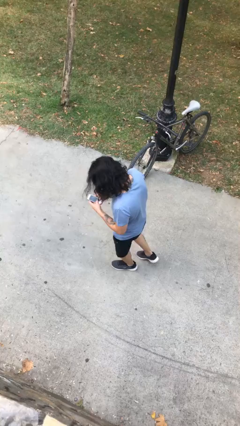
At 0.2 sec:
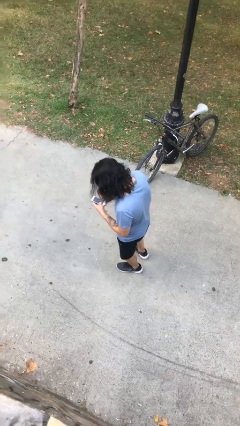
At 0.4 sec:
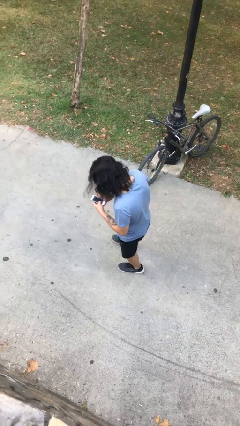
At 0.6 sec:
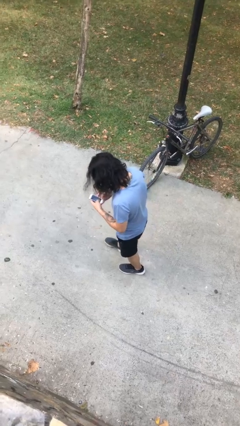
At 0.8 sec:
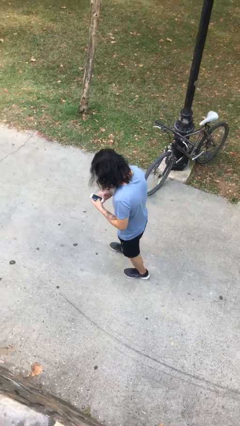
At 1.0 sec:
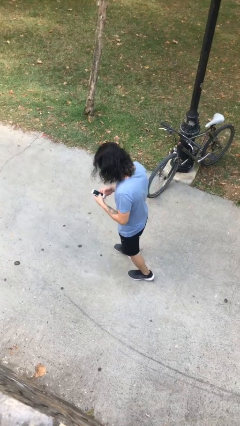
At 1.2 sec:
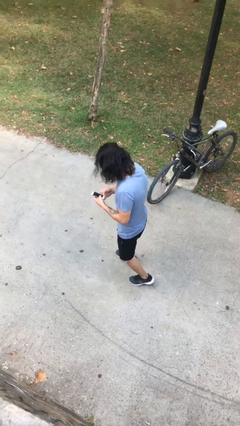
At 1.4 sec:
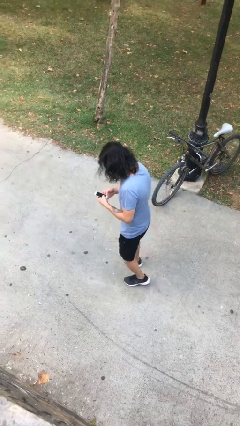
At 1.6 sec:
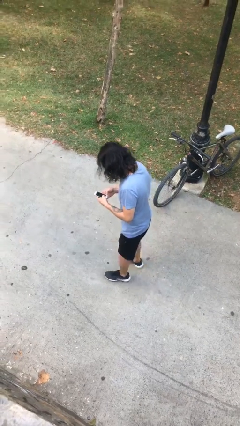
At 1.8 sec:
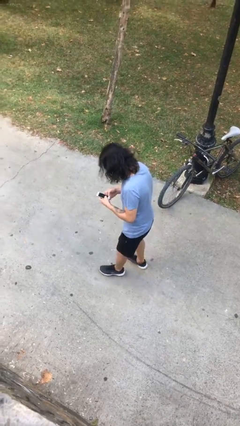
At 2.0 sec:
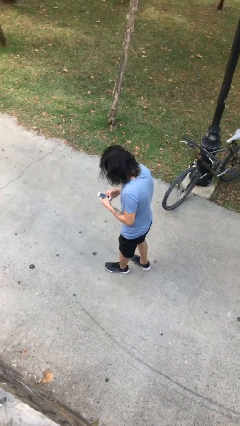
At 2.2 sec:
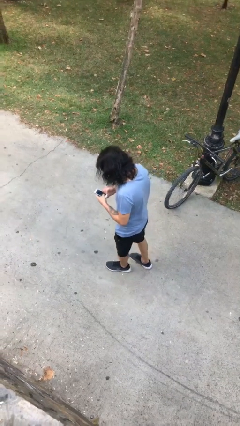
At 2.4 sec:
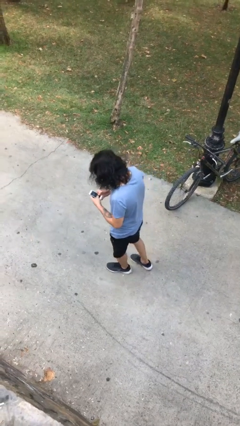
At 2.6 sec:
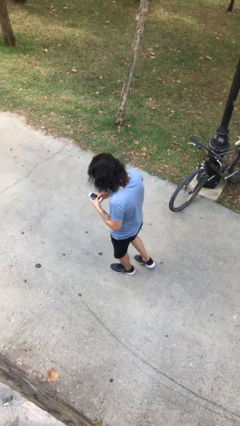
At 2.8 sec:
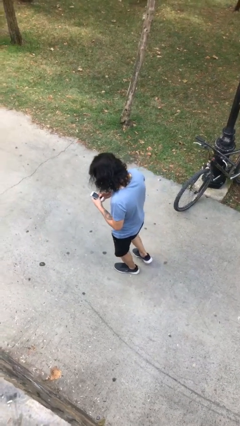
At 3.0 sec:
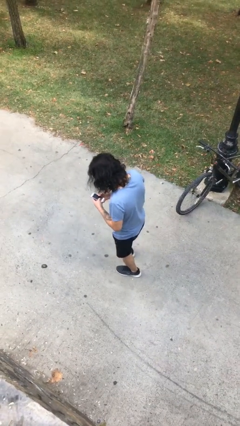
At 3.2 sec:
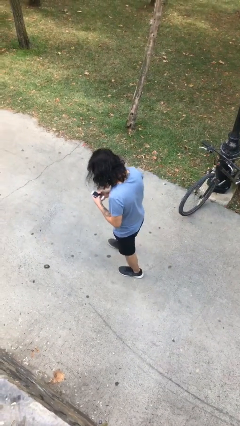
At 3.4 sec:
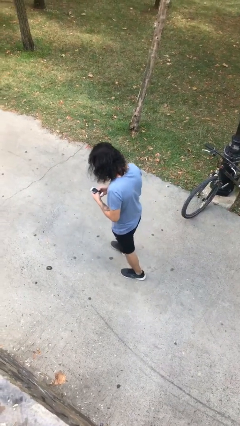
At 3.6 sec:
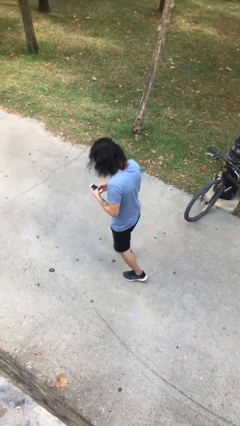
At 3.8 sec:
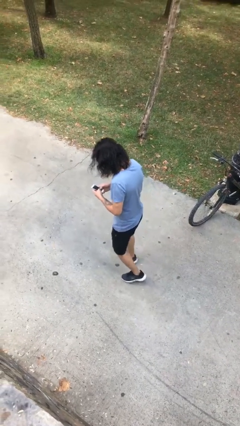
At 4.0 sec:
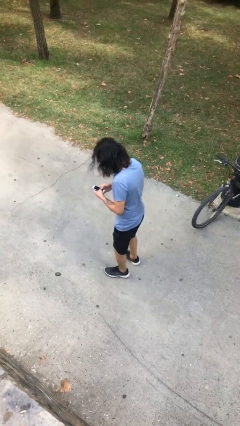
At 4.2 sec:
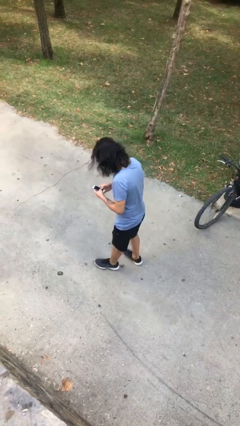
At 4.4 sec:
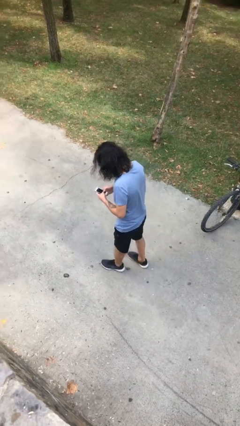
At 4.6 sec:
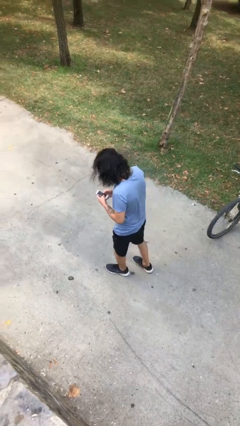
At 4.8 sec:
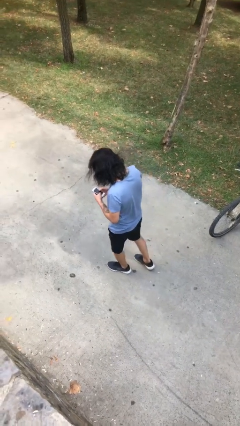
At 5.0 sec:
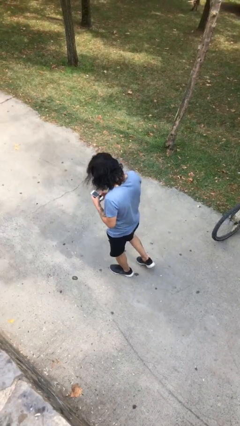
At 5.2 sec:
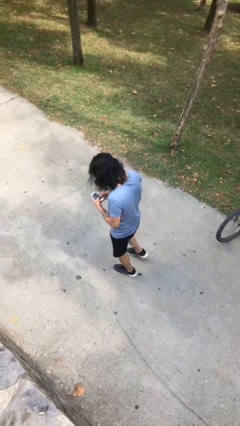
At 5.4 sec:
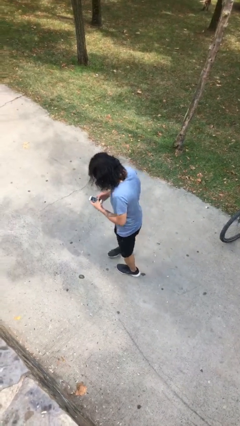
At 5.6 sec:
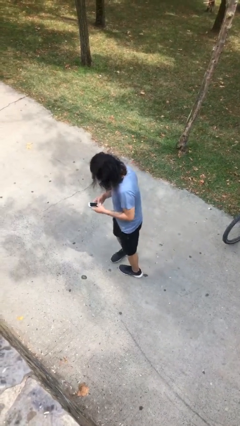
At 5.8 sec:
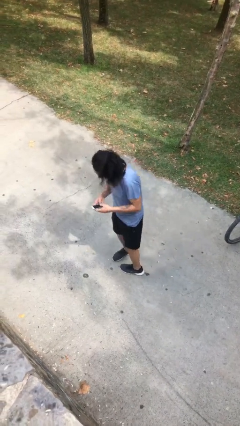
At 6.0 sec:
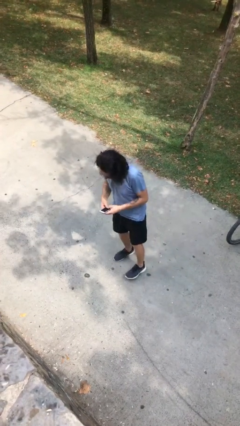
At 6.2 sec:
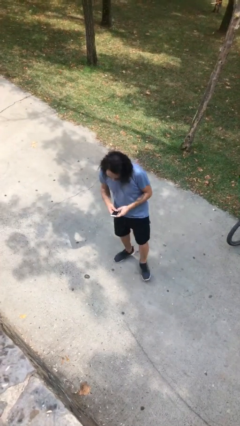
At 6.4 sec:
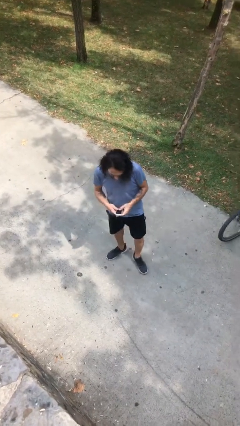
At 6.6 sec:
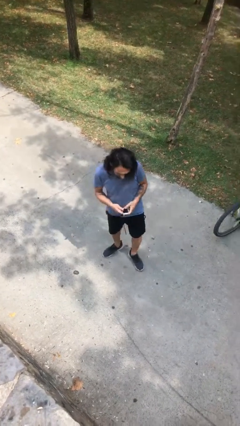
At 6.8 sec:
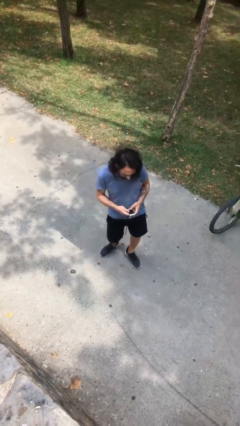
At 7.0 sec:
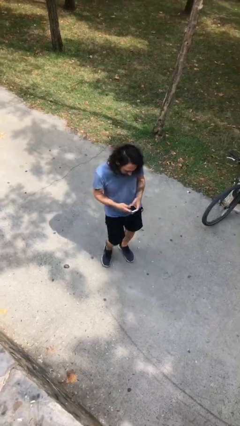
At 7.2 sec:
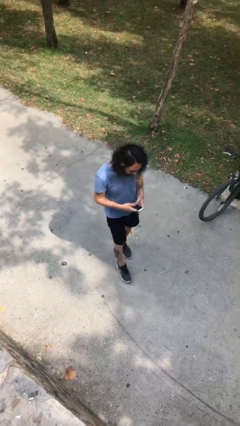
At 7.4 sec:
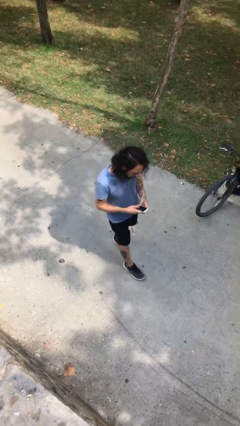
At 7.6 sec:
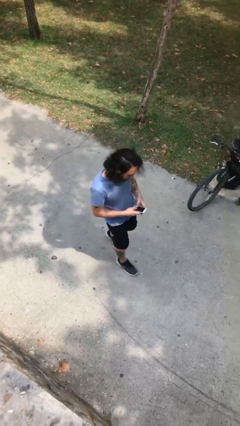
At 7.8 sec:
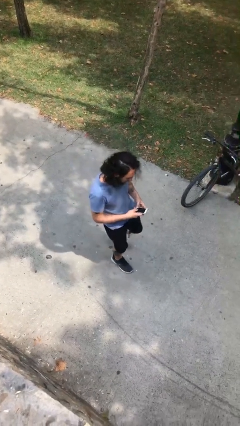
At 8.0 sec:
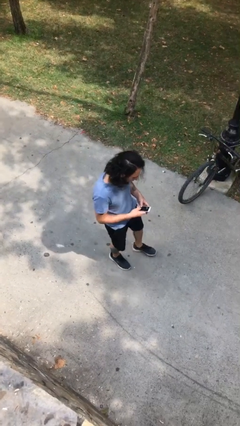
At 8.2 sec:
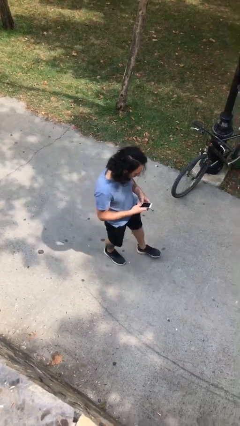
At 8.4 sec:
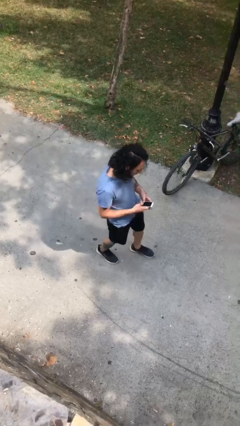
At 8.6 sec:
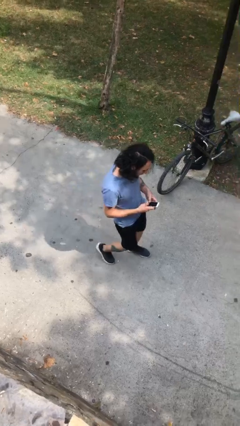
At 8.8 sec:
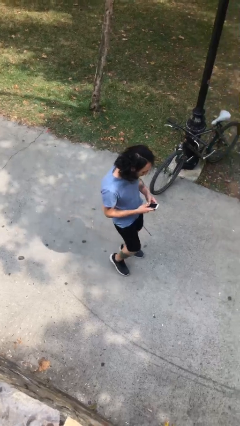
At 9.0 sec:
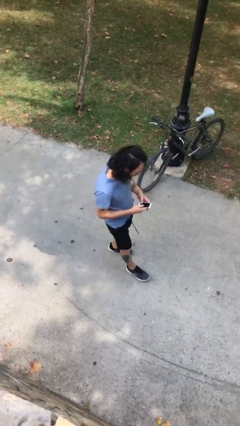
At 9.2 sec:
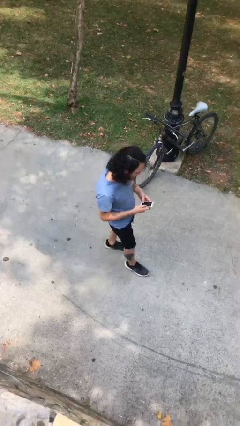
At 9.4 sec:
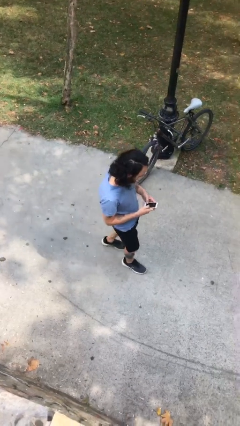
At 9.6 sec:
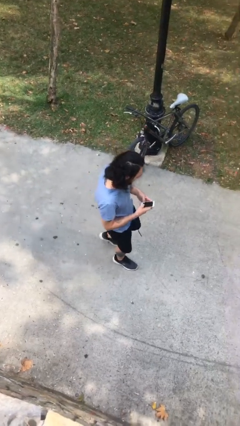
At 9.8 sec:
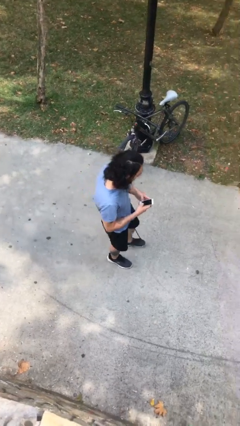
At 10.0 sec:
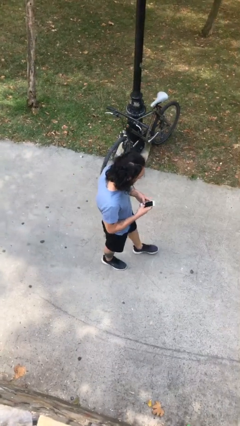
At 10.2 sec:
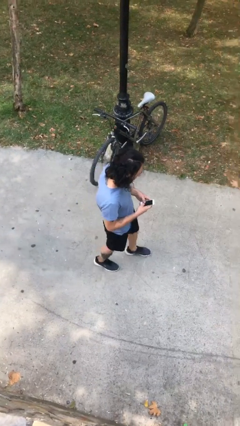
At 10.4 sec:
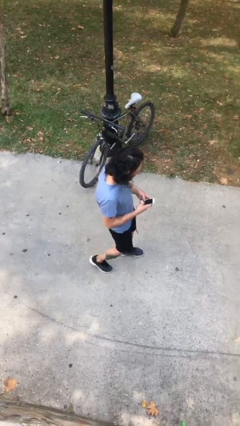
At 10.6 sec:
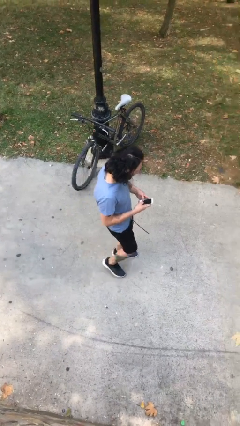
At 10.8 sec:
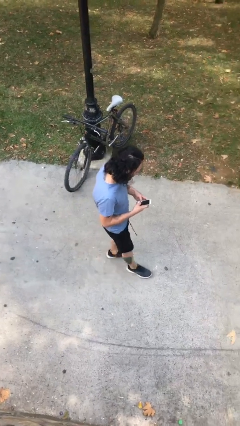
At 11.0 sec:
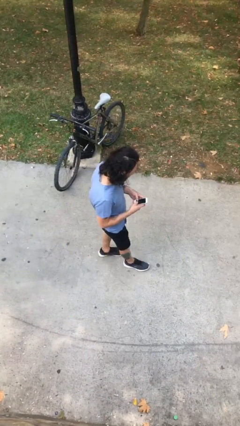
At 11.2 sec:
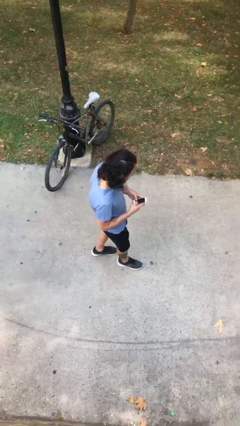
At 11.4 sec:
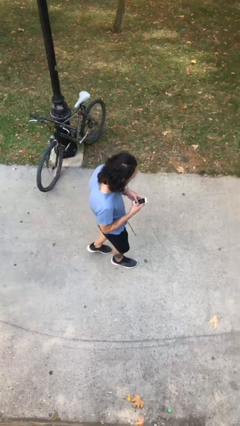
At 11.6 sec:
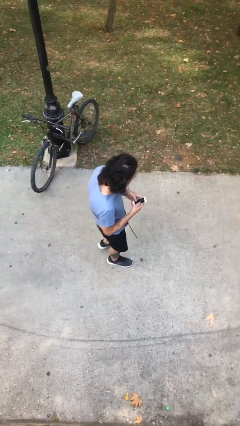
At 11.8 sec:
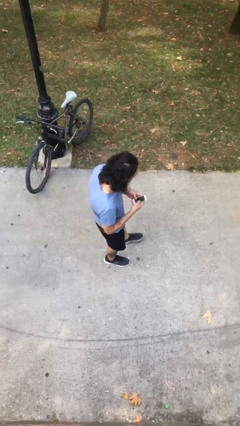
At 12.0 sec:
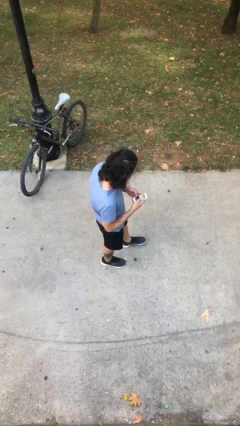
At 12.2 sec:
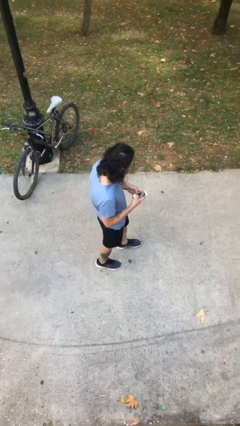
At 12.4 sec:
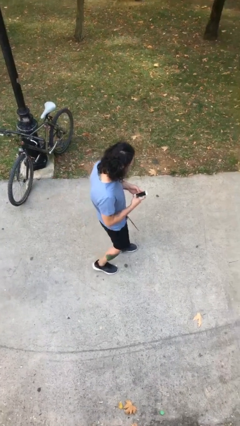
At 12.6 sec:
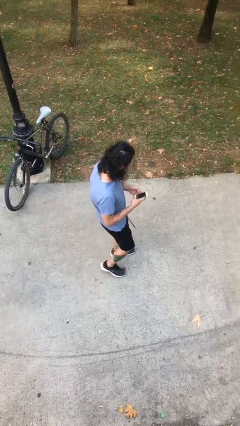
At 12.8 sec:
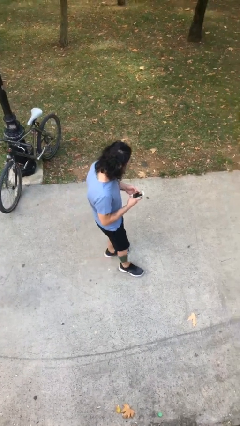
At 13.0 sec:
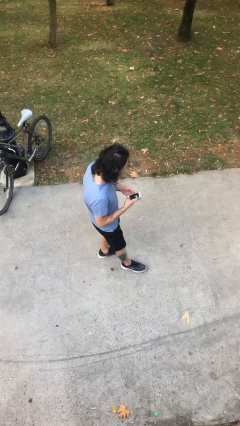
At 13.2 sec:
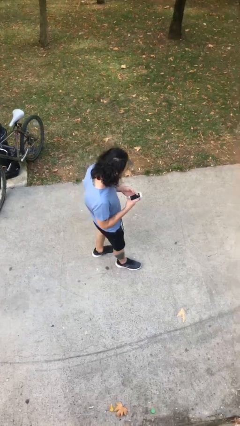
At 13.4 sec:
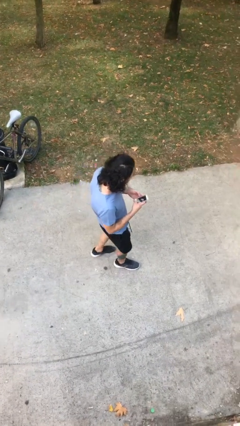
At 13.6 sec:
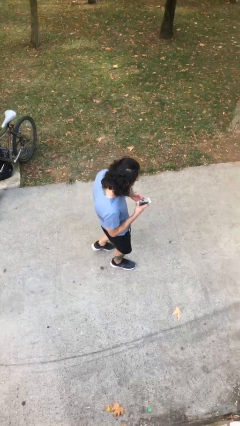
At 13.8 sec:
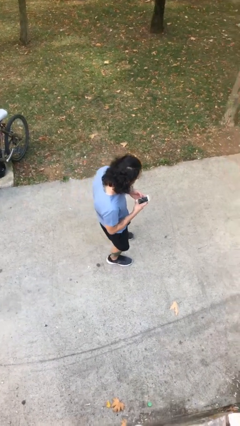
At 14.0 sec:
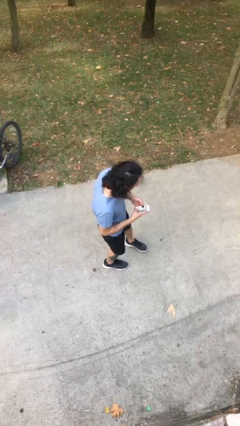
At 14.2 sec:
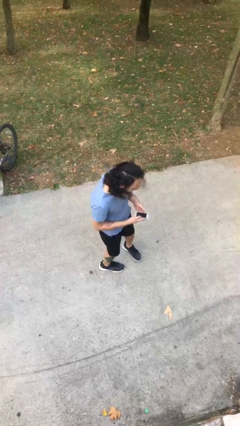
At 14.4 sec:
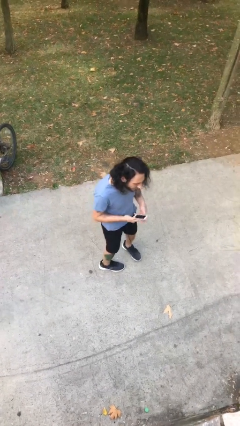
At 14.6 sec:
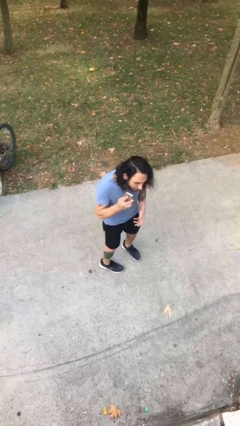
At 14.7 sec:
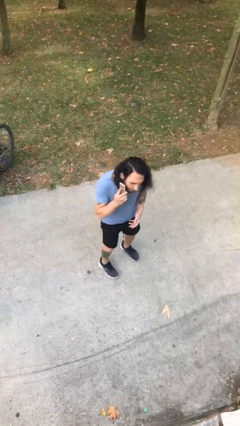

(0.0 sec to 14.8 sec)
person texts on phone

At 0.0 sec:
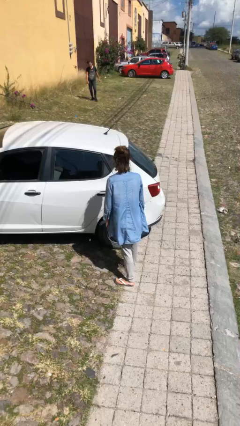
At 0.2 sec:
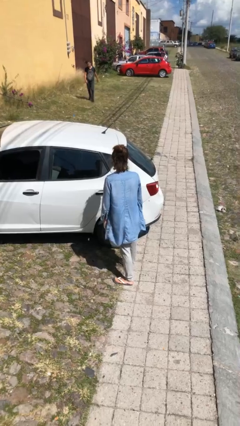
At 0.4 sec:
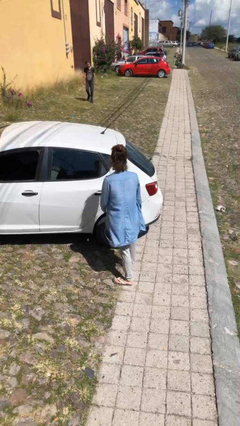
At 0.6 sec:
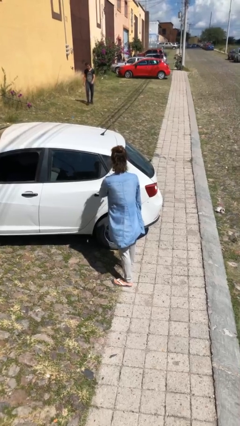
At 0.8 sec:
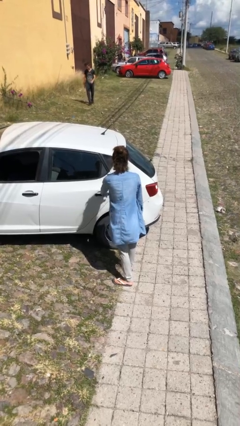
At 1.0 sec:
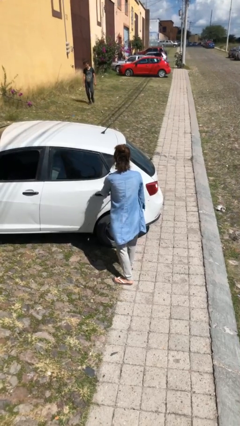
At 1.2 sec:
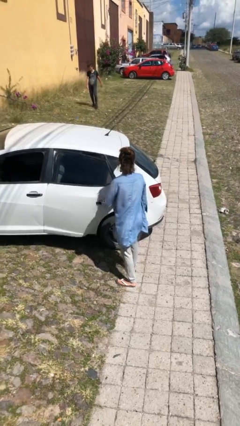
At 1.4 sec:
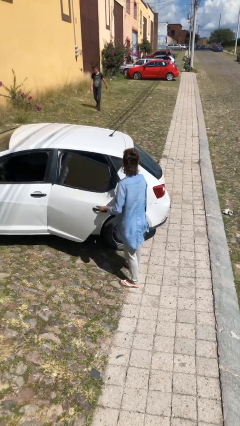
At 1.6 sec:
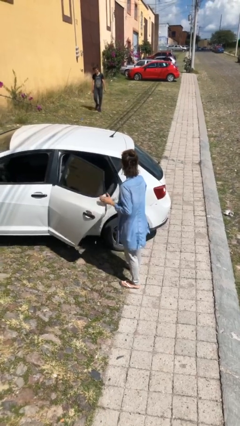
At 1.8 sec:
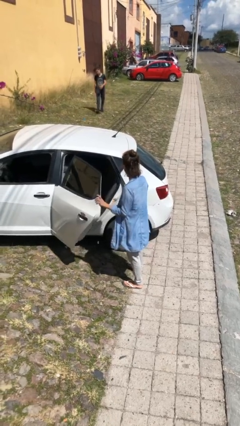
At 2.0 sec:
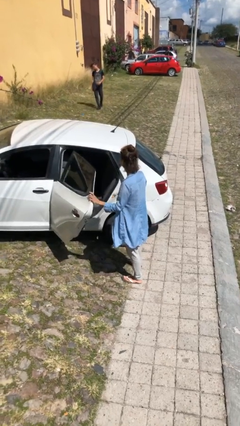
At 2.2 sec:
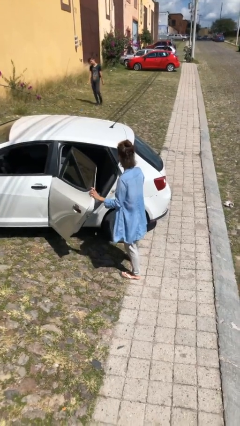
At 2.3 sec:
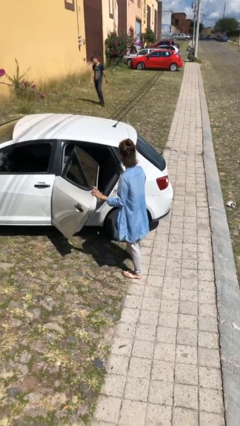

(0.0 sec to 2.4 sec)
person opens car door

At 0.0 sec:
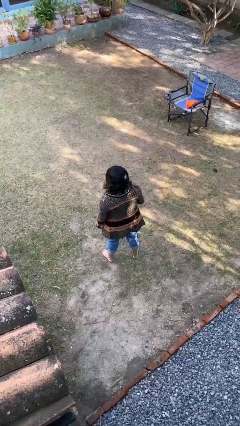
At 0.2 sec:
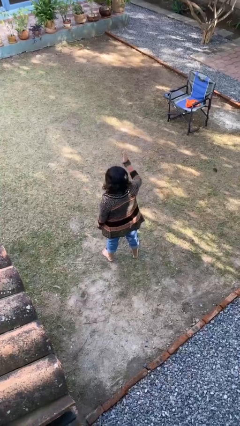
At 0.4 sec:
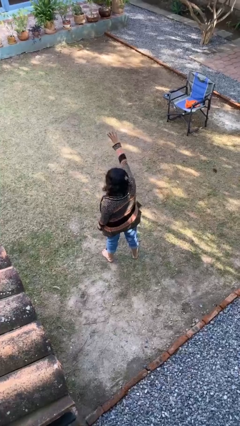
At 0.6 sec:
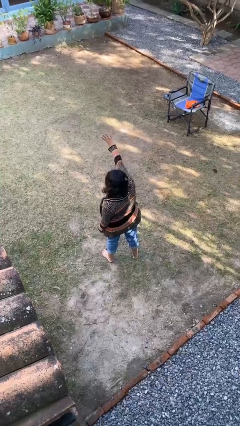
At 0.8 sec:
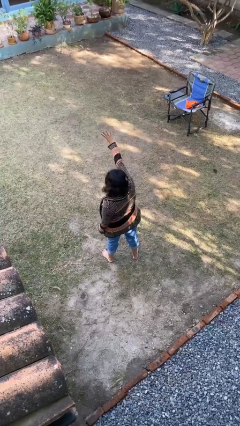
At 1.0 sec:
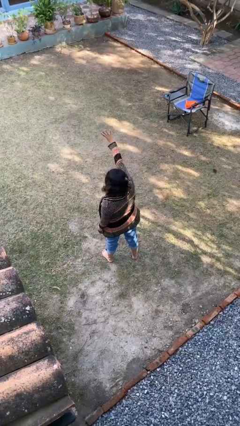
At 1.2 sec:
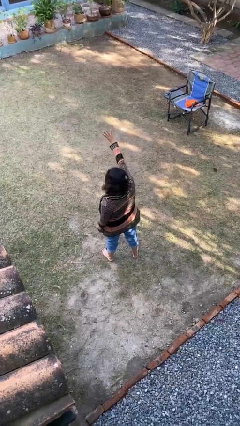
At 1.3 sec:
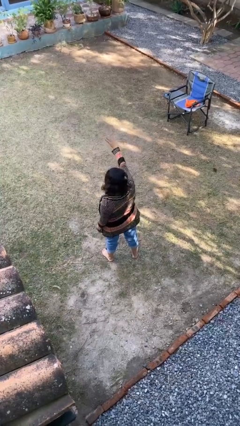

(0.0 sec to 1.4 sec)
person gestures number four
